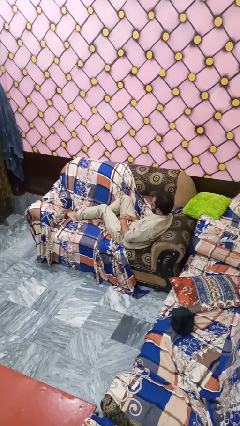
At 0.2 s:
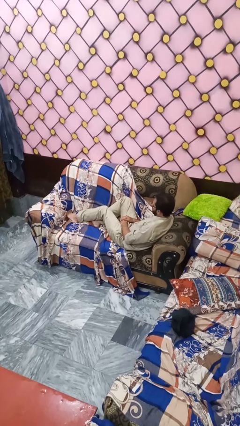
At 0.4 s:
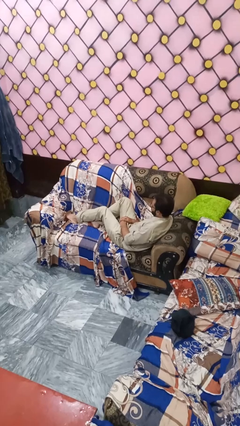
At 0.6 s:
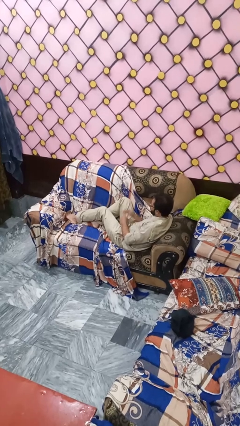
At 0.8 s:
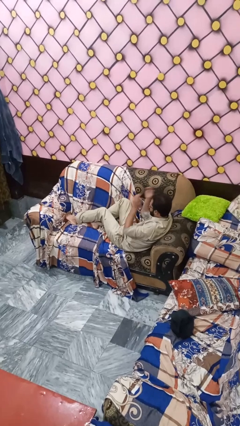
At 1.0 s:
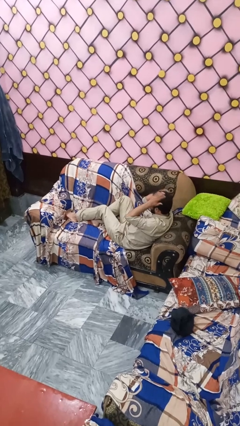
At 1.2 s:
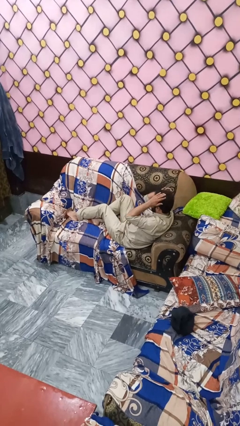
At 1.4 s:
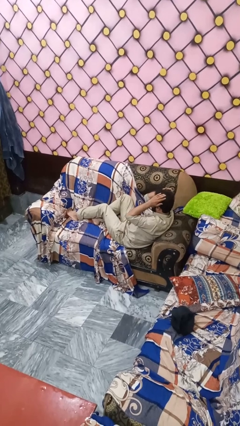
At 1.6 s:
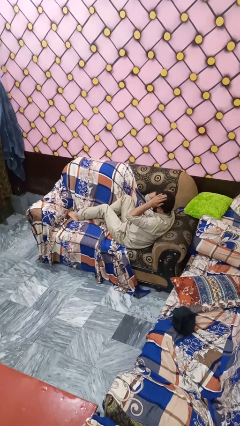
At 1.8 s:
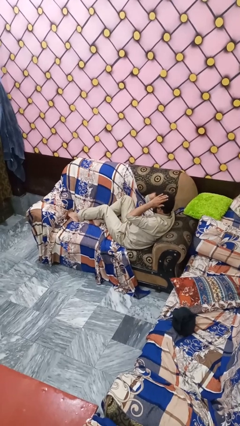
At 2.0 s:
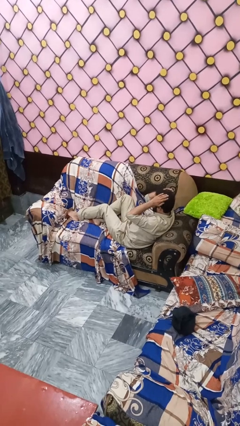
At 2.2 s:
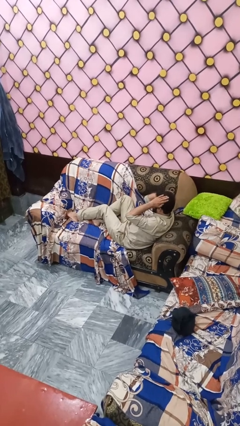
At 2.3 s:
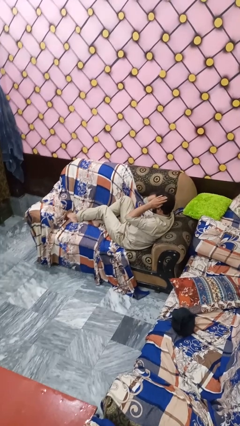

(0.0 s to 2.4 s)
person pats head

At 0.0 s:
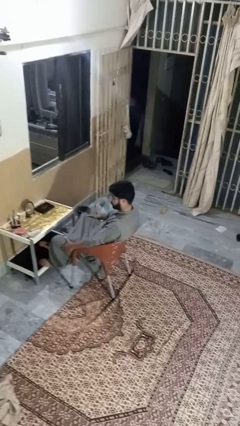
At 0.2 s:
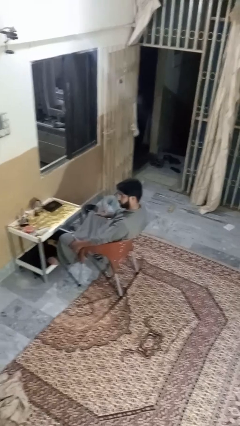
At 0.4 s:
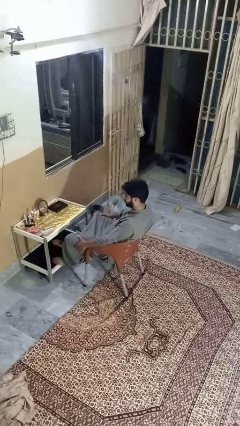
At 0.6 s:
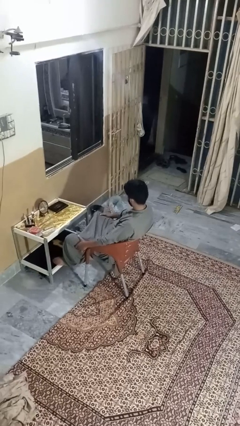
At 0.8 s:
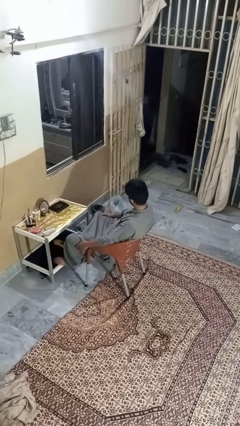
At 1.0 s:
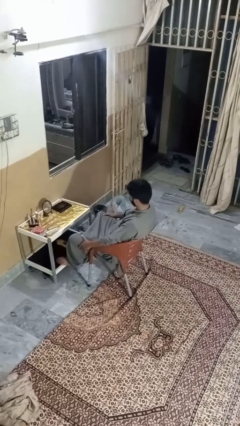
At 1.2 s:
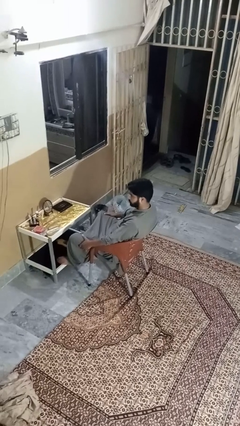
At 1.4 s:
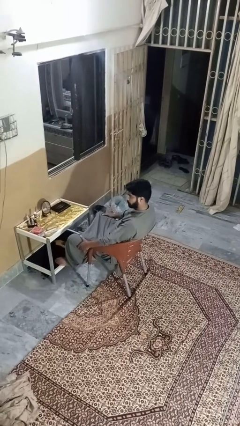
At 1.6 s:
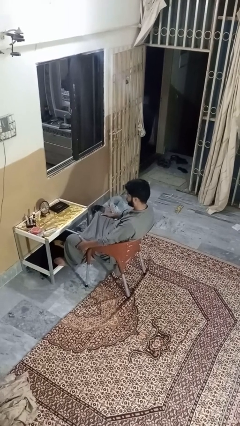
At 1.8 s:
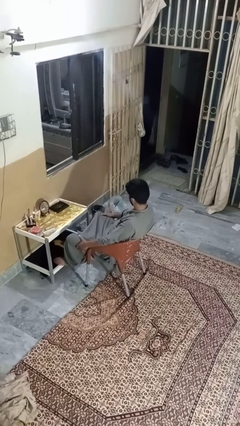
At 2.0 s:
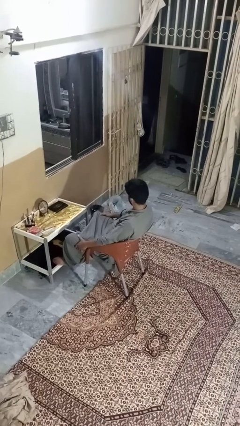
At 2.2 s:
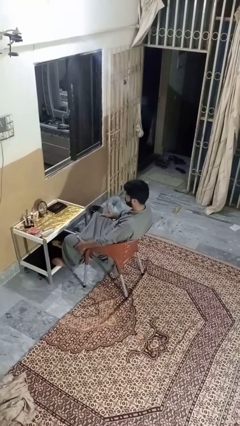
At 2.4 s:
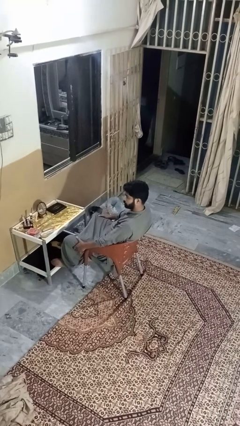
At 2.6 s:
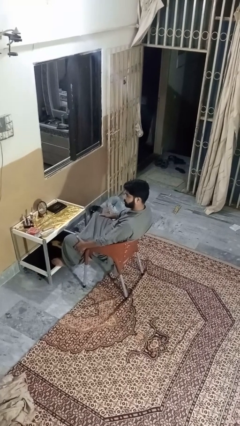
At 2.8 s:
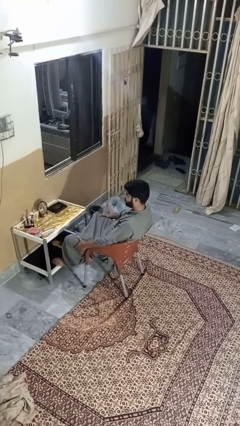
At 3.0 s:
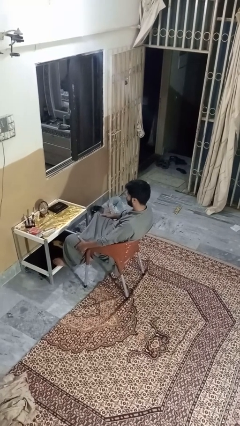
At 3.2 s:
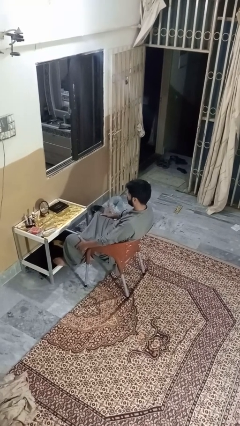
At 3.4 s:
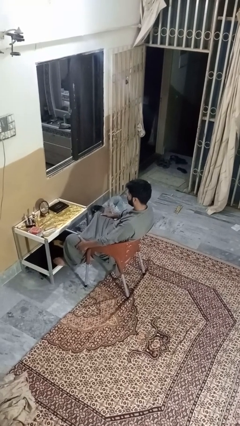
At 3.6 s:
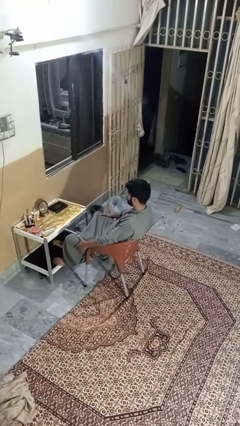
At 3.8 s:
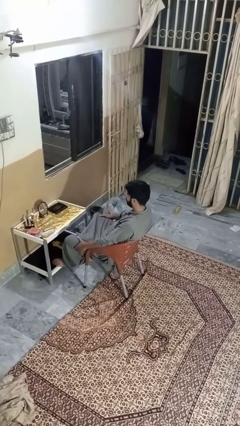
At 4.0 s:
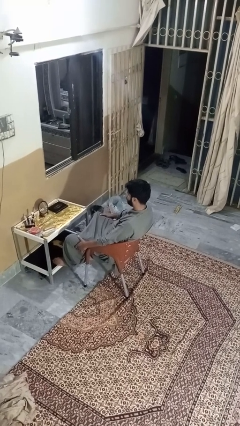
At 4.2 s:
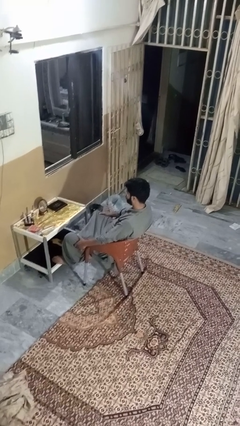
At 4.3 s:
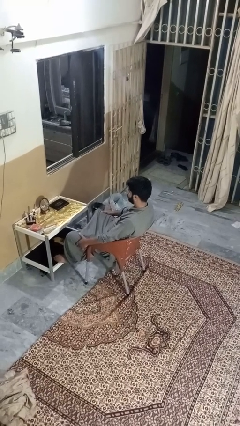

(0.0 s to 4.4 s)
person shakes head

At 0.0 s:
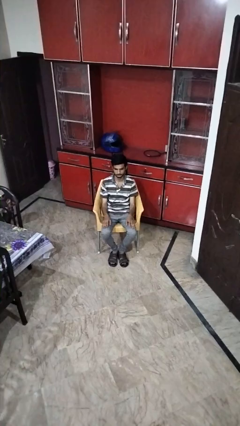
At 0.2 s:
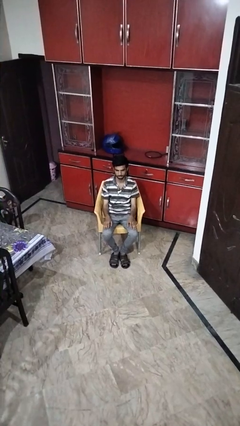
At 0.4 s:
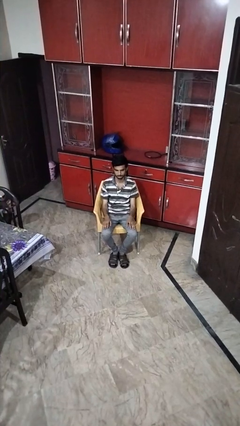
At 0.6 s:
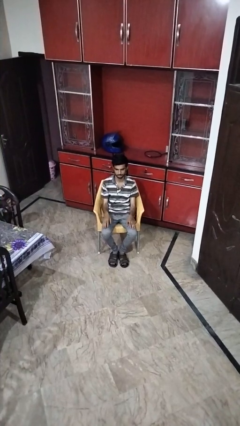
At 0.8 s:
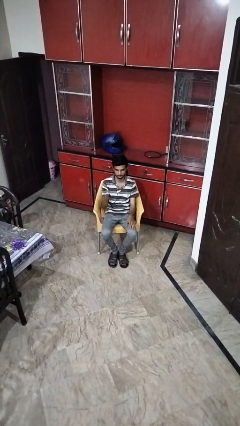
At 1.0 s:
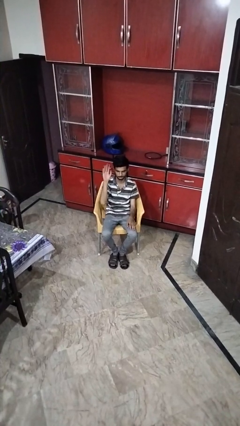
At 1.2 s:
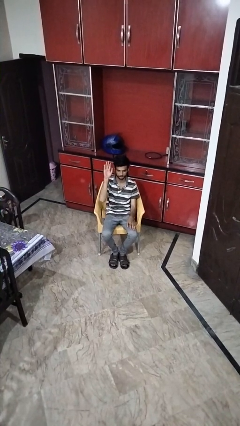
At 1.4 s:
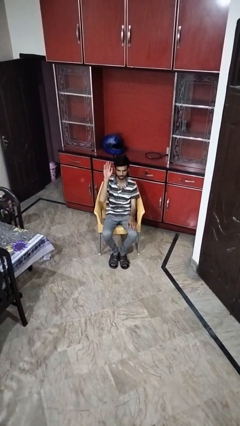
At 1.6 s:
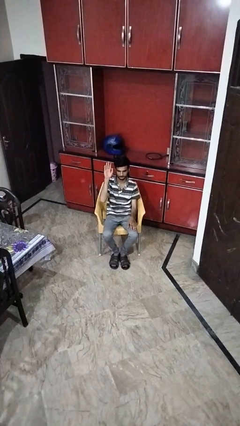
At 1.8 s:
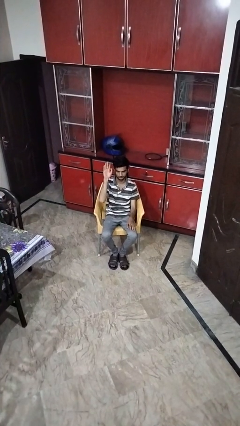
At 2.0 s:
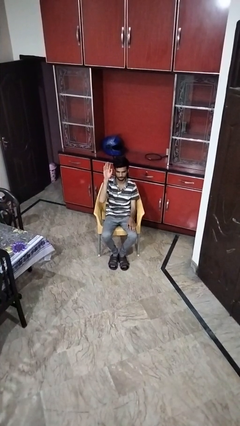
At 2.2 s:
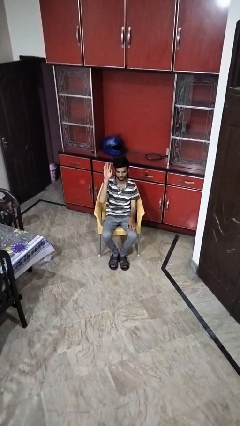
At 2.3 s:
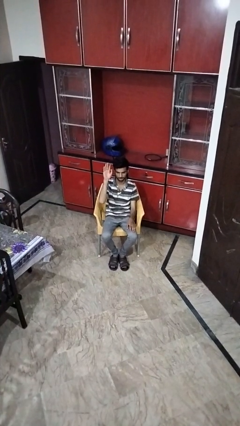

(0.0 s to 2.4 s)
person gestures raise hand

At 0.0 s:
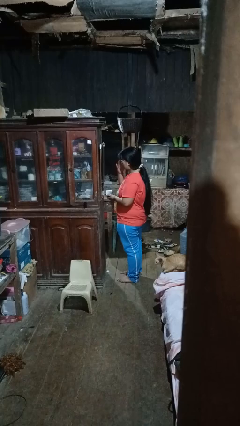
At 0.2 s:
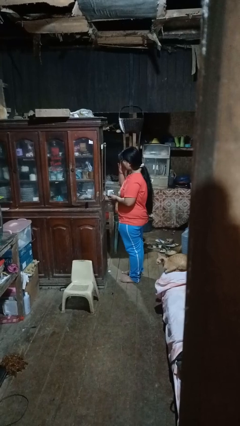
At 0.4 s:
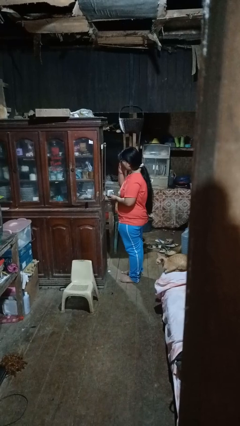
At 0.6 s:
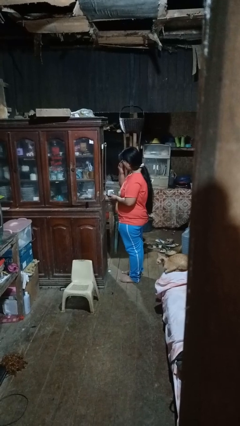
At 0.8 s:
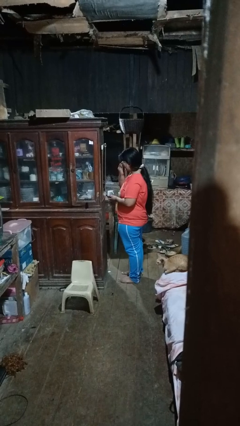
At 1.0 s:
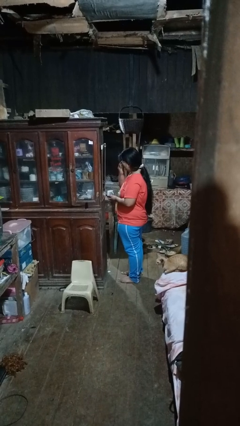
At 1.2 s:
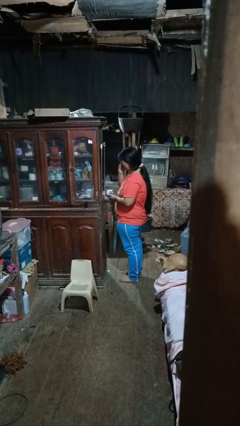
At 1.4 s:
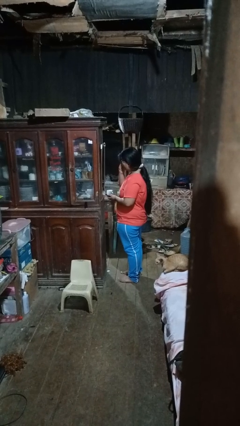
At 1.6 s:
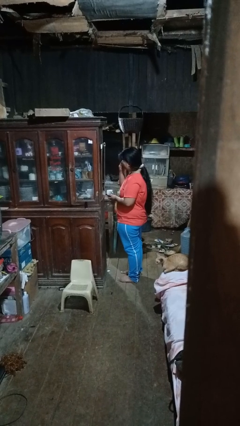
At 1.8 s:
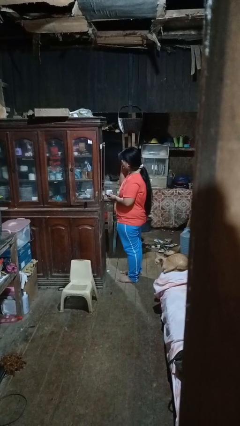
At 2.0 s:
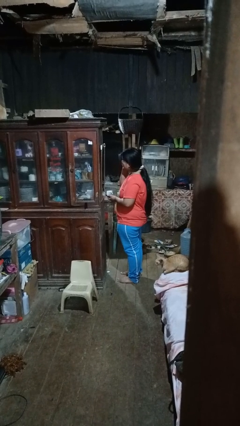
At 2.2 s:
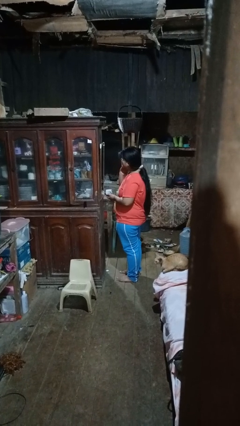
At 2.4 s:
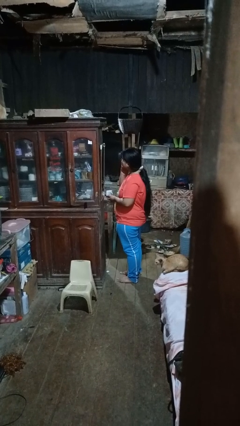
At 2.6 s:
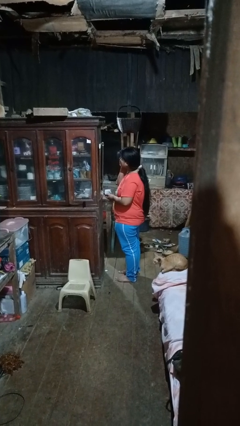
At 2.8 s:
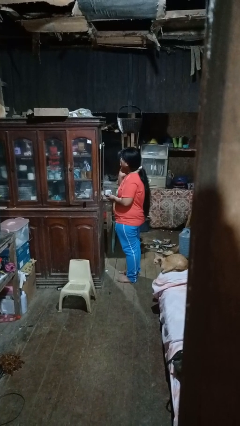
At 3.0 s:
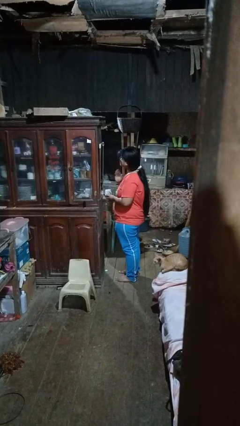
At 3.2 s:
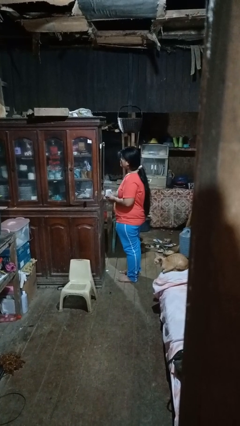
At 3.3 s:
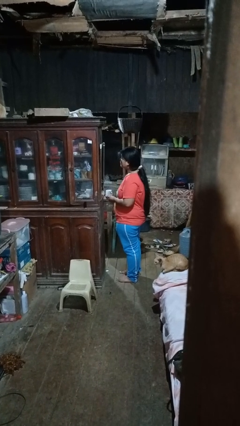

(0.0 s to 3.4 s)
person applies foundation makeup

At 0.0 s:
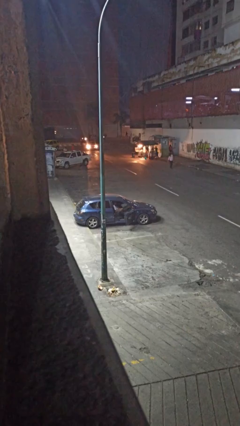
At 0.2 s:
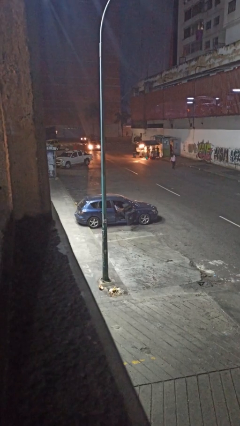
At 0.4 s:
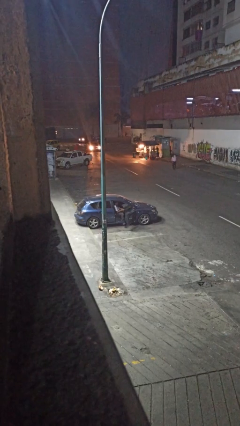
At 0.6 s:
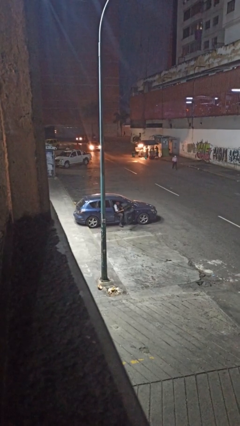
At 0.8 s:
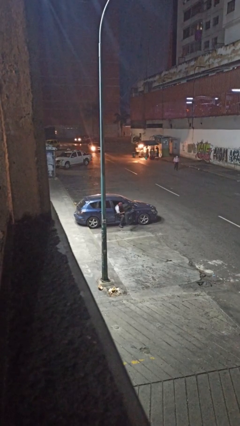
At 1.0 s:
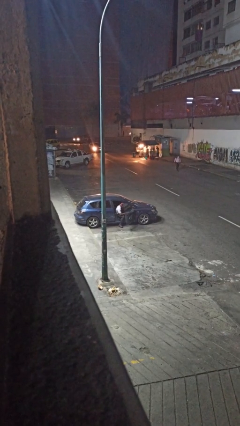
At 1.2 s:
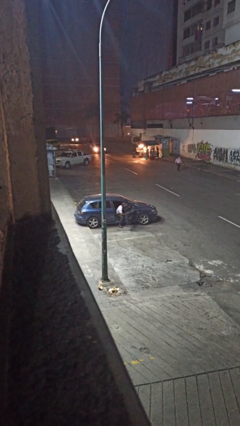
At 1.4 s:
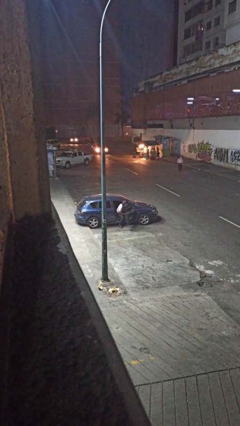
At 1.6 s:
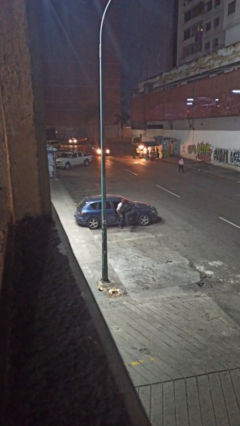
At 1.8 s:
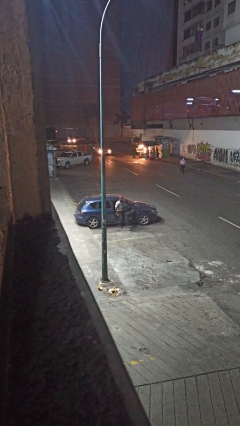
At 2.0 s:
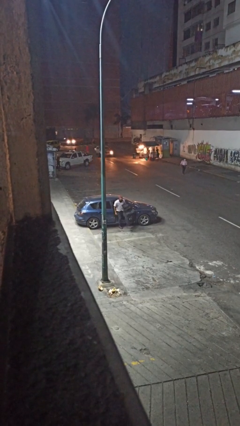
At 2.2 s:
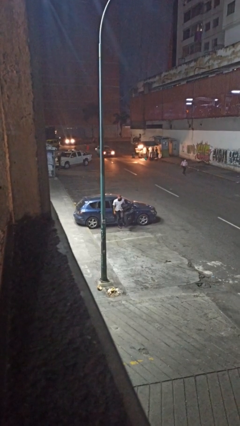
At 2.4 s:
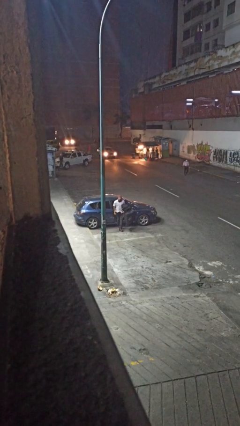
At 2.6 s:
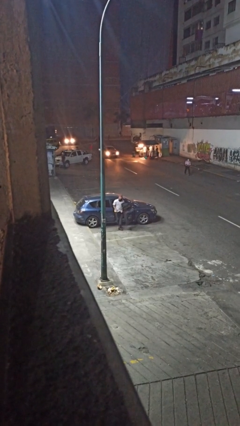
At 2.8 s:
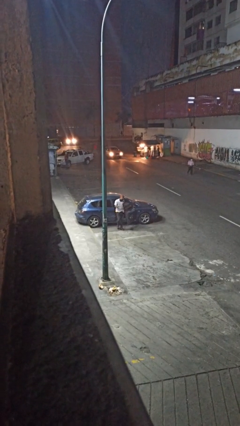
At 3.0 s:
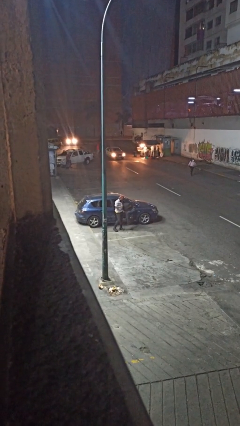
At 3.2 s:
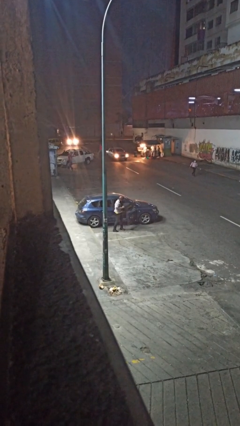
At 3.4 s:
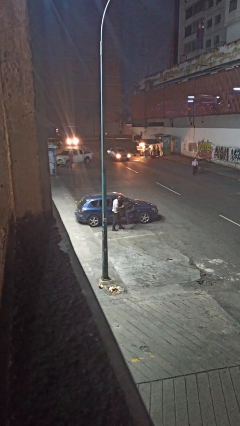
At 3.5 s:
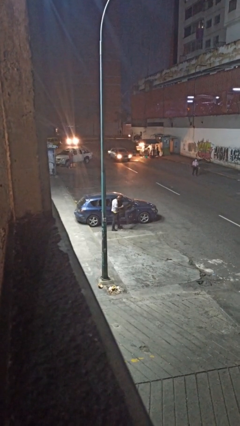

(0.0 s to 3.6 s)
person exits car

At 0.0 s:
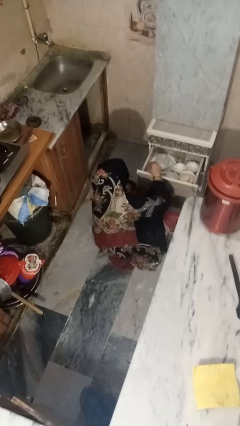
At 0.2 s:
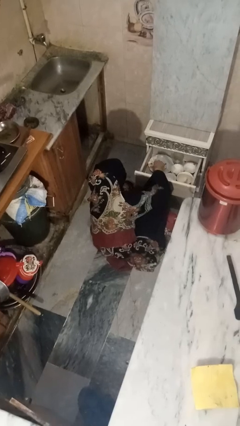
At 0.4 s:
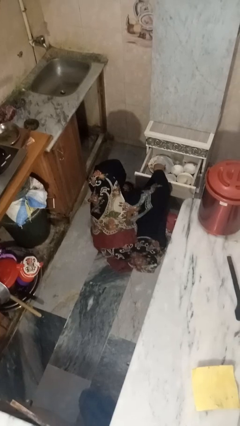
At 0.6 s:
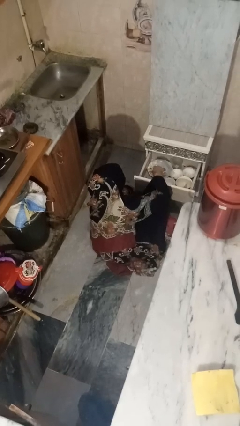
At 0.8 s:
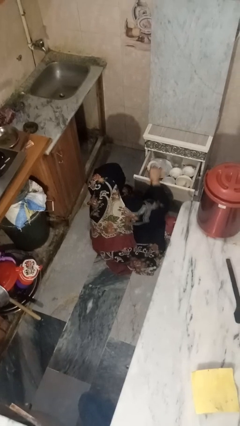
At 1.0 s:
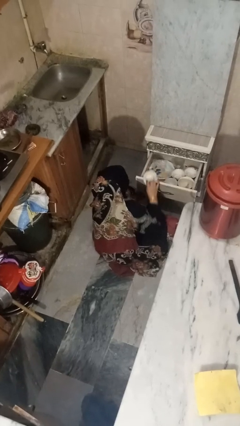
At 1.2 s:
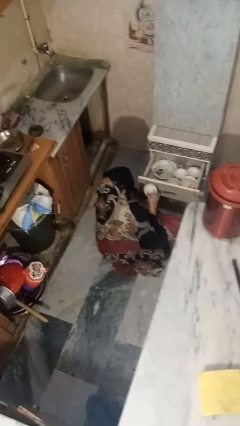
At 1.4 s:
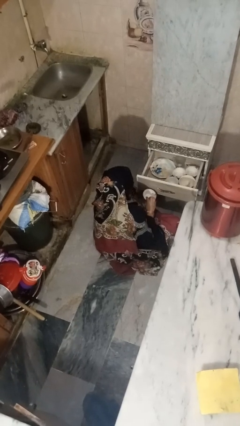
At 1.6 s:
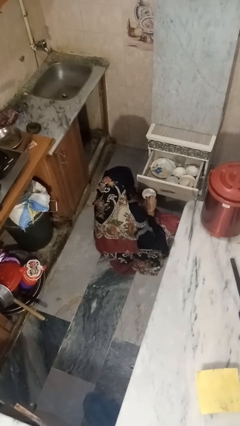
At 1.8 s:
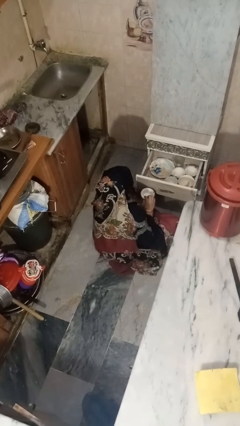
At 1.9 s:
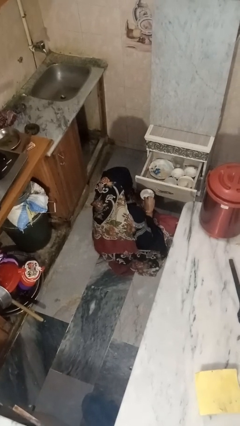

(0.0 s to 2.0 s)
person takes object from kitchen drawer
